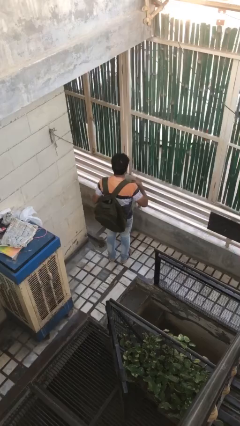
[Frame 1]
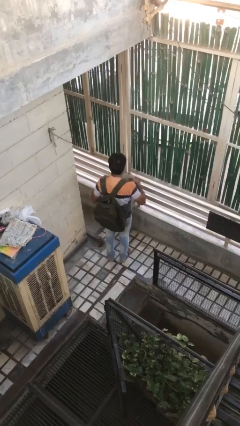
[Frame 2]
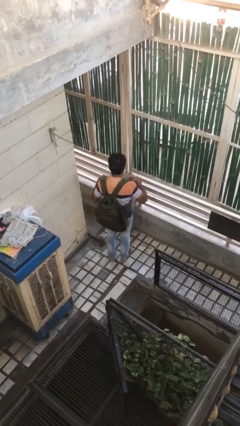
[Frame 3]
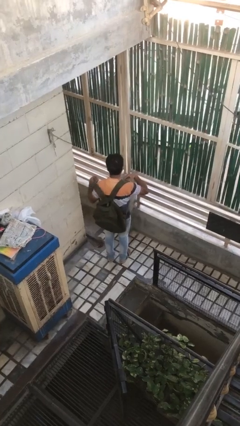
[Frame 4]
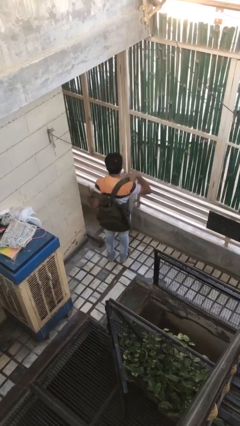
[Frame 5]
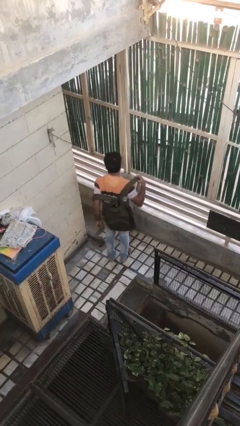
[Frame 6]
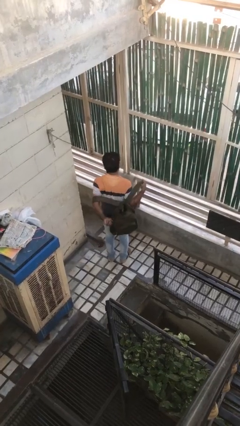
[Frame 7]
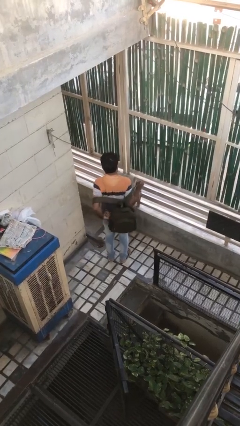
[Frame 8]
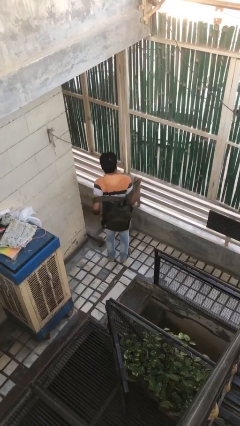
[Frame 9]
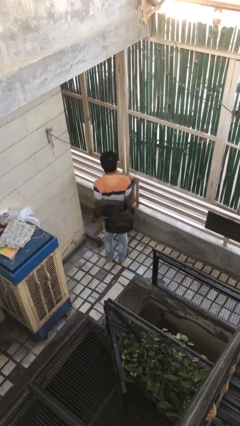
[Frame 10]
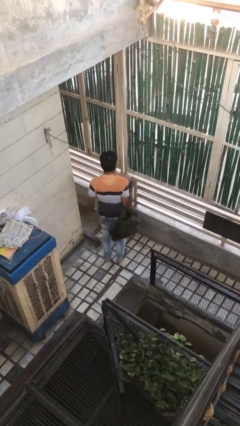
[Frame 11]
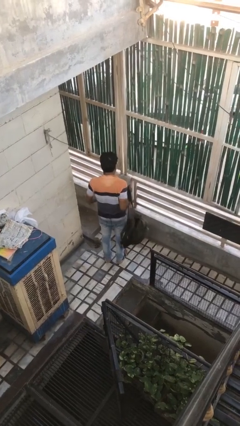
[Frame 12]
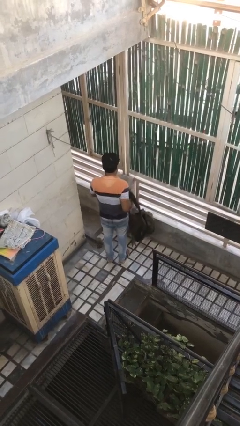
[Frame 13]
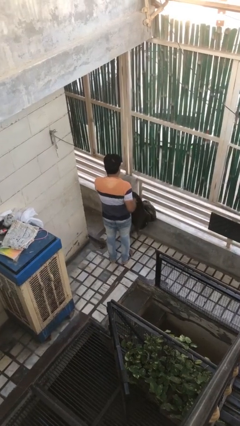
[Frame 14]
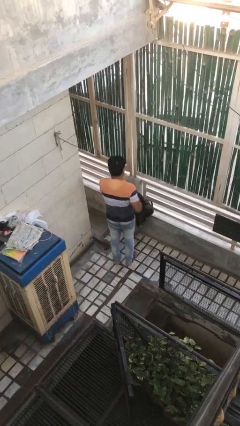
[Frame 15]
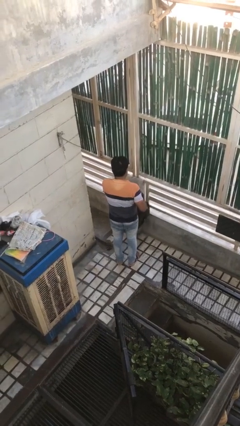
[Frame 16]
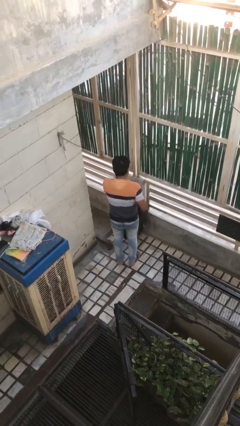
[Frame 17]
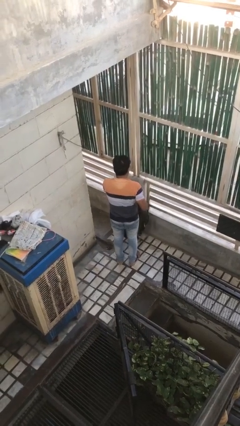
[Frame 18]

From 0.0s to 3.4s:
person takes off backpack

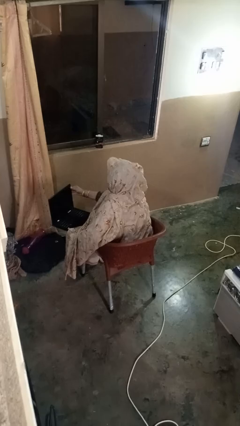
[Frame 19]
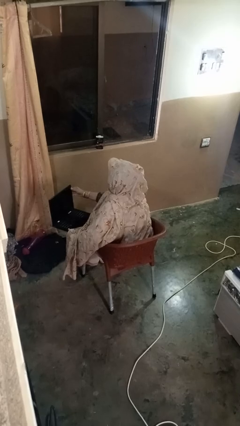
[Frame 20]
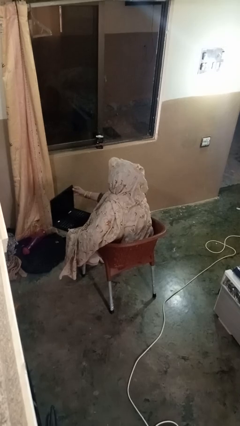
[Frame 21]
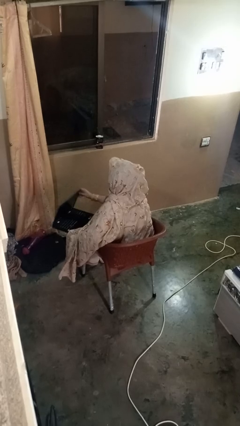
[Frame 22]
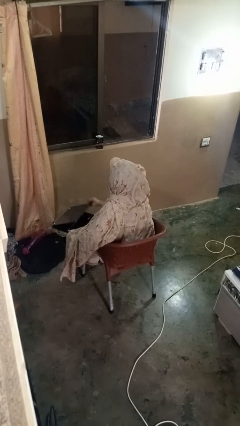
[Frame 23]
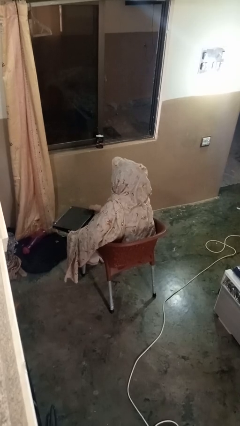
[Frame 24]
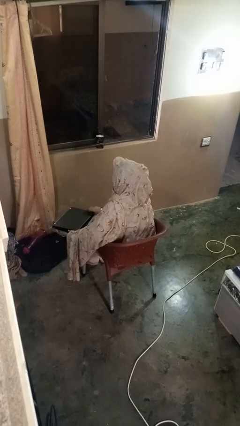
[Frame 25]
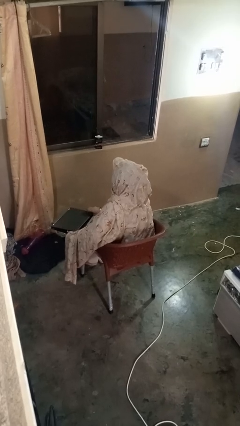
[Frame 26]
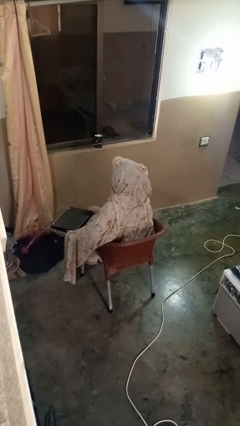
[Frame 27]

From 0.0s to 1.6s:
person closes laptop

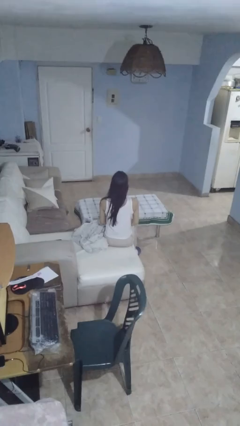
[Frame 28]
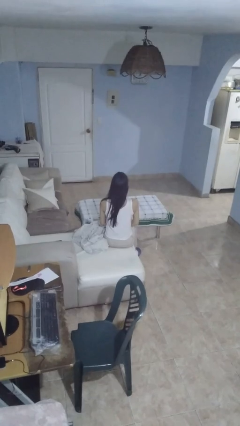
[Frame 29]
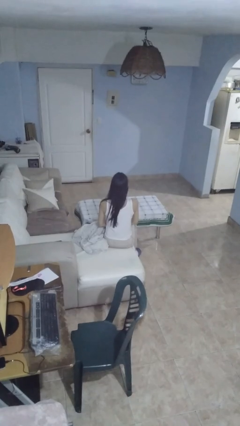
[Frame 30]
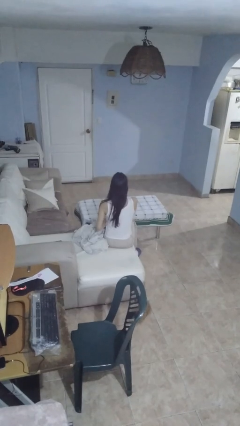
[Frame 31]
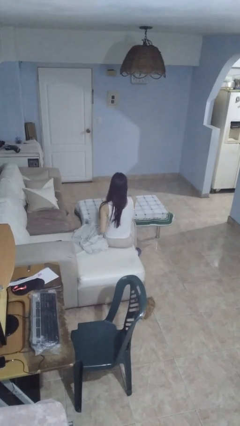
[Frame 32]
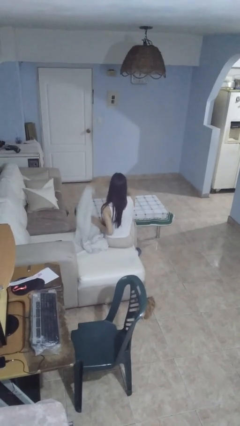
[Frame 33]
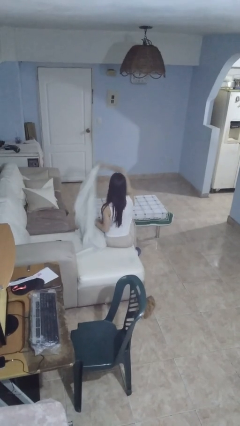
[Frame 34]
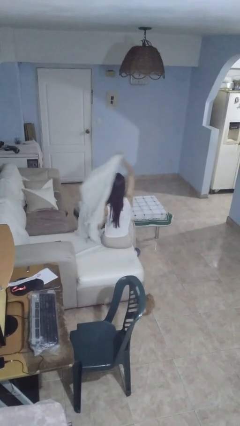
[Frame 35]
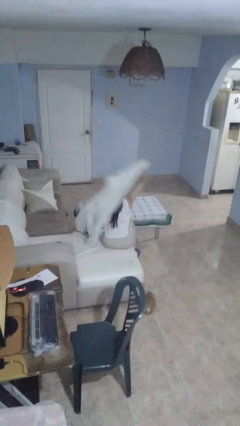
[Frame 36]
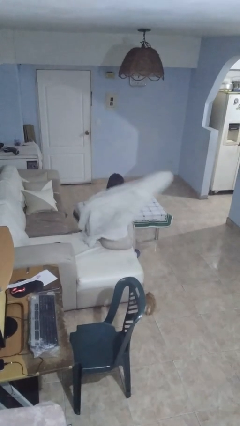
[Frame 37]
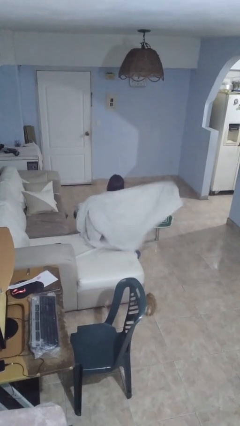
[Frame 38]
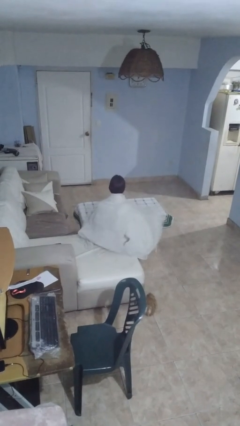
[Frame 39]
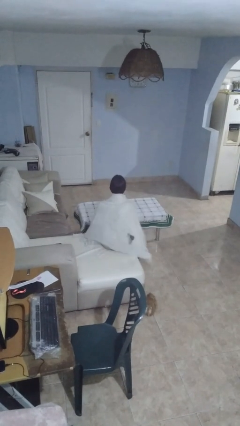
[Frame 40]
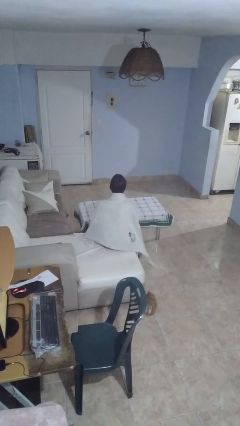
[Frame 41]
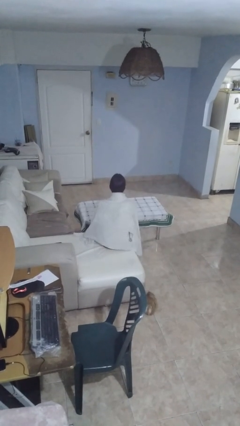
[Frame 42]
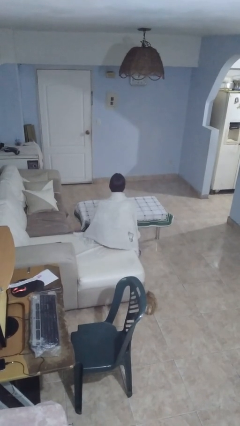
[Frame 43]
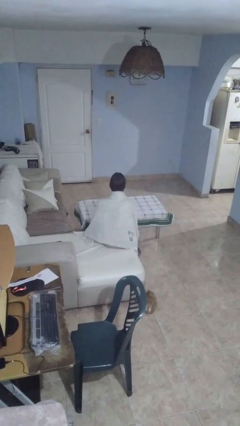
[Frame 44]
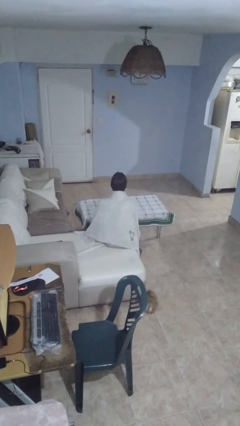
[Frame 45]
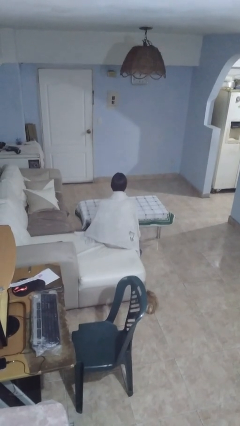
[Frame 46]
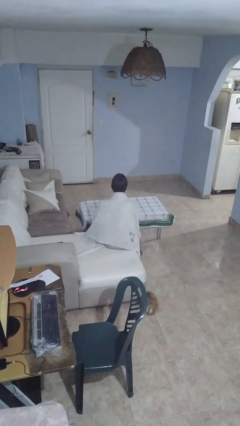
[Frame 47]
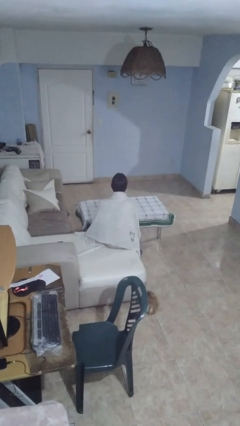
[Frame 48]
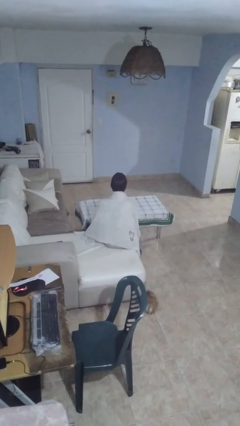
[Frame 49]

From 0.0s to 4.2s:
person covers with blanket

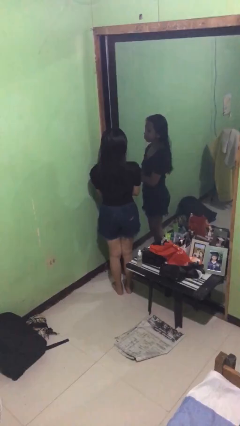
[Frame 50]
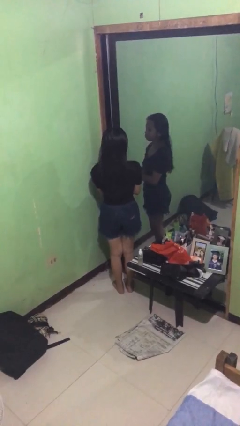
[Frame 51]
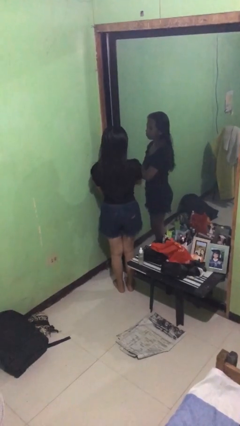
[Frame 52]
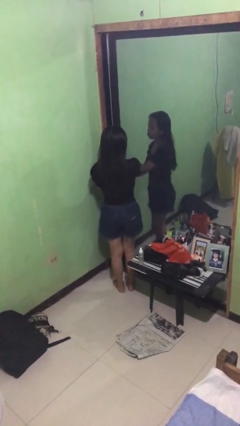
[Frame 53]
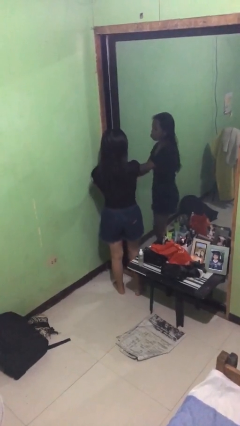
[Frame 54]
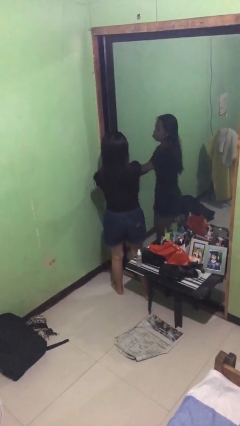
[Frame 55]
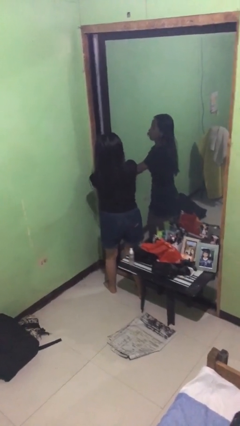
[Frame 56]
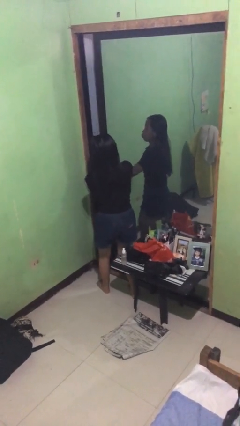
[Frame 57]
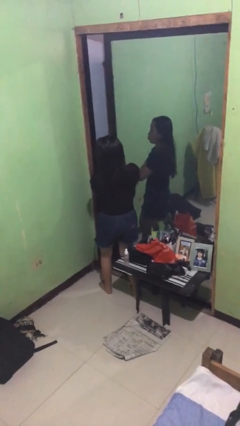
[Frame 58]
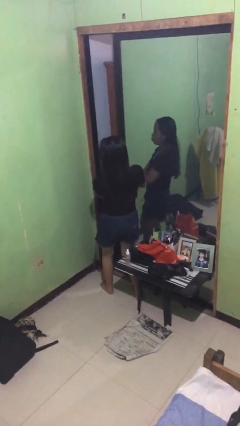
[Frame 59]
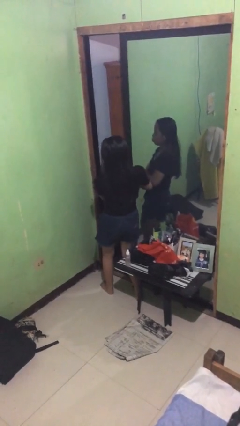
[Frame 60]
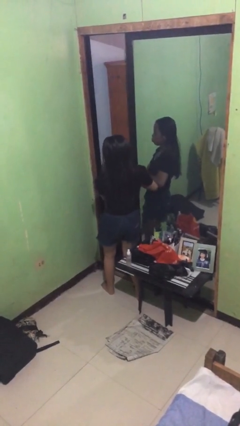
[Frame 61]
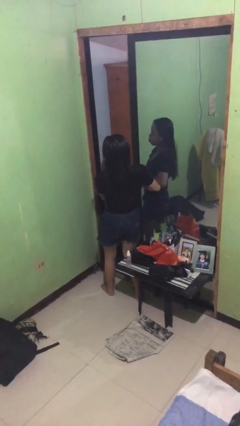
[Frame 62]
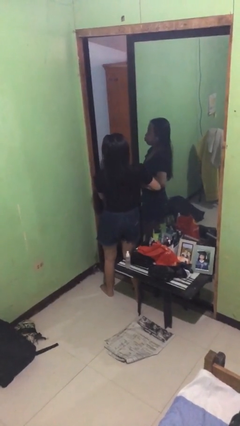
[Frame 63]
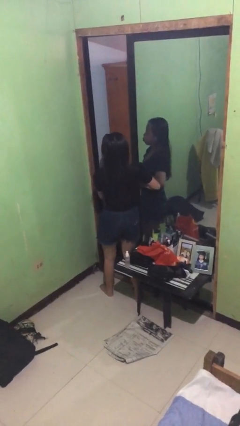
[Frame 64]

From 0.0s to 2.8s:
person opens sliding door

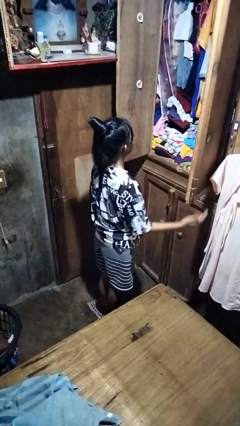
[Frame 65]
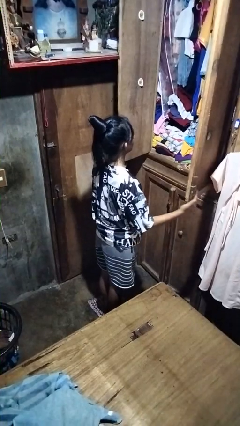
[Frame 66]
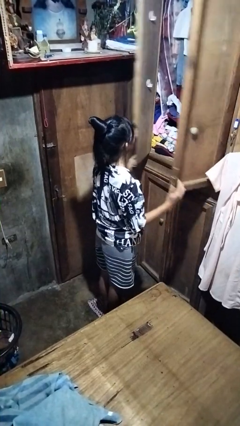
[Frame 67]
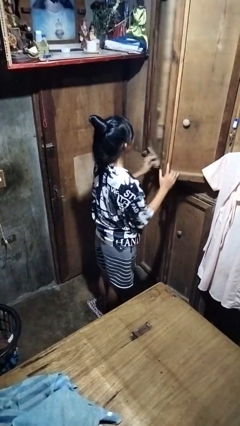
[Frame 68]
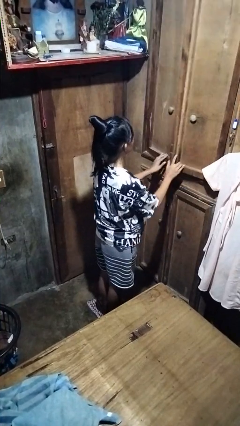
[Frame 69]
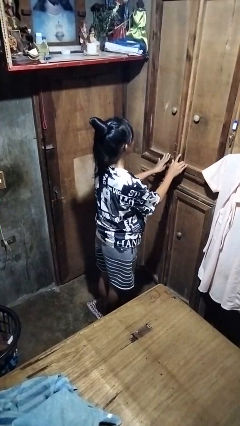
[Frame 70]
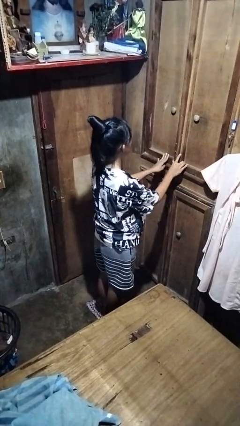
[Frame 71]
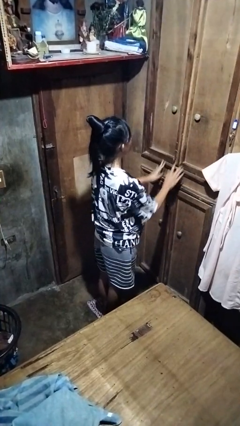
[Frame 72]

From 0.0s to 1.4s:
person closes closet door

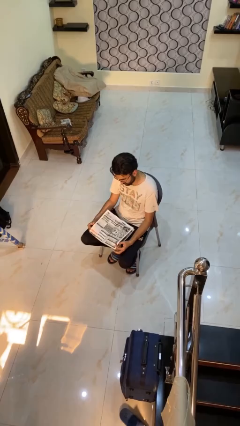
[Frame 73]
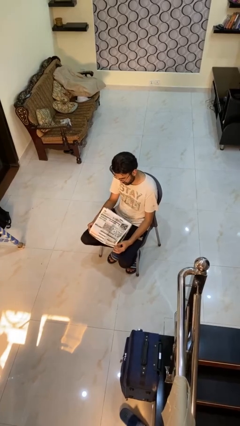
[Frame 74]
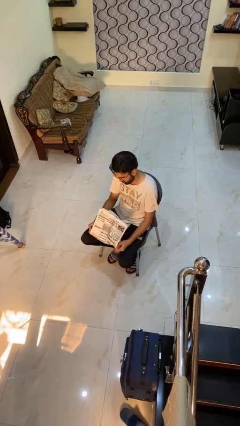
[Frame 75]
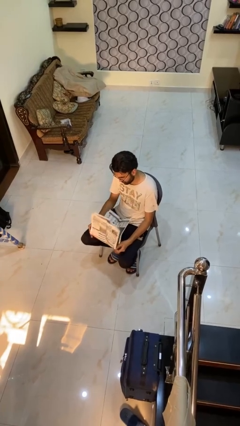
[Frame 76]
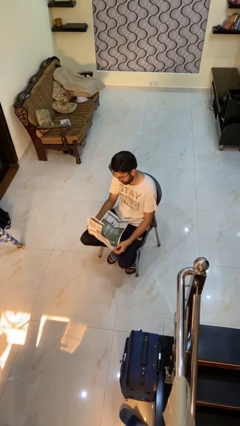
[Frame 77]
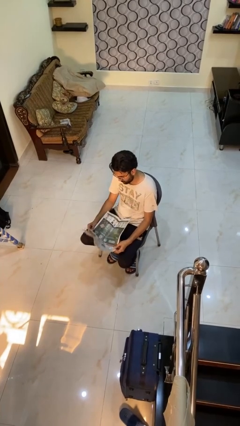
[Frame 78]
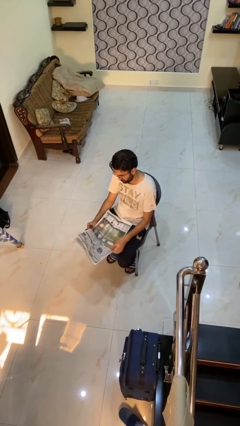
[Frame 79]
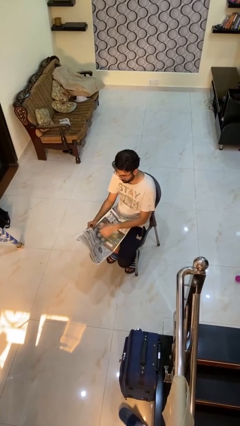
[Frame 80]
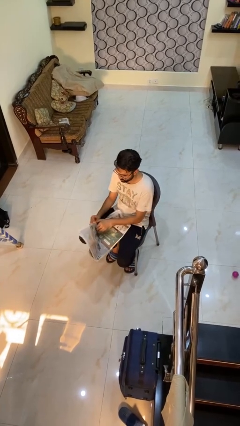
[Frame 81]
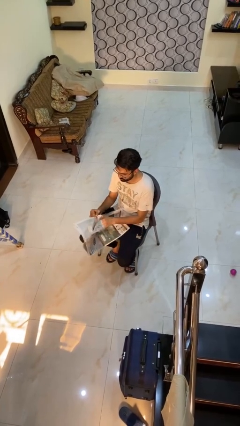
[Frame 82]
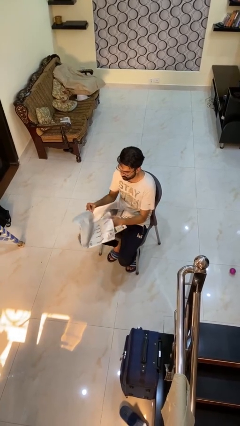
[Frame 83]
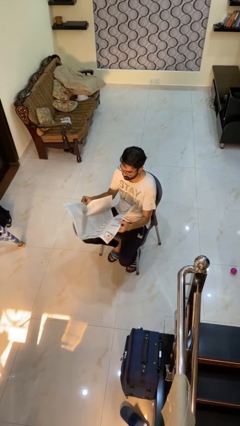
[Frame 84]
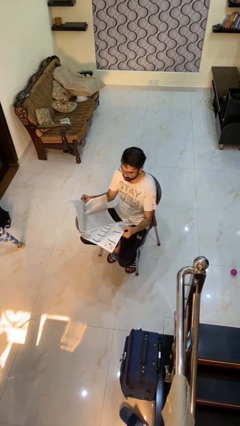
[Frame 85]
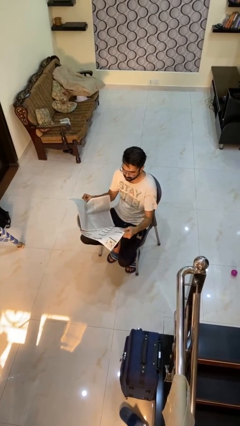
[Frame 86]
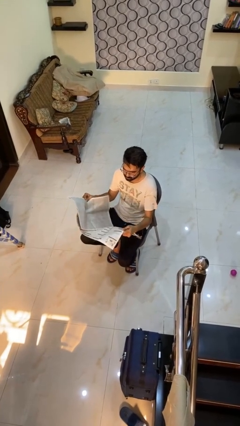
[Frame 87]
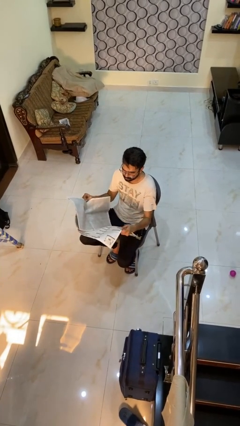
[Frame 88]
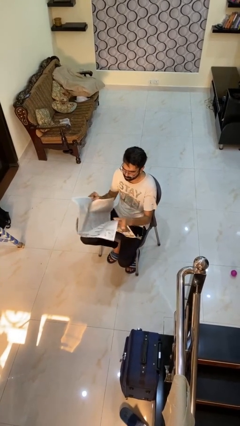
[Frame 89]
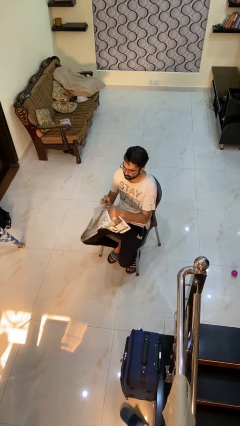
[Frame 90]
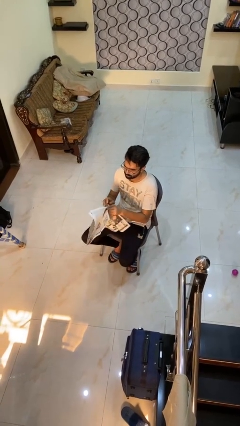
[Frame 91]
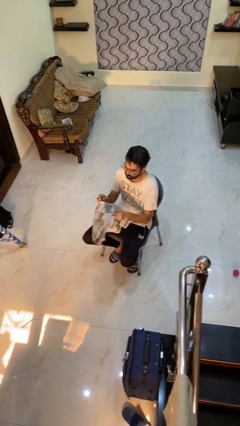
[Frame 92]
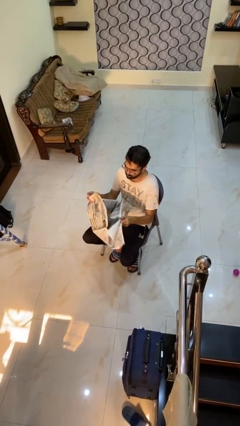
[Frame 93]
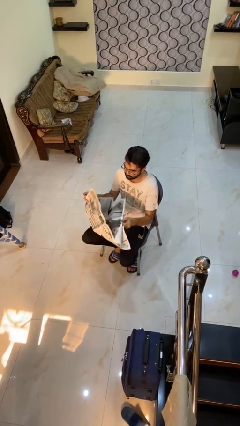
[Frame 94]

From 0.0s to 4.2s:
person reads newspaper
